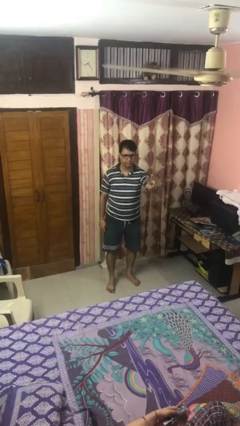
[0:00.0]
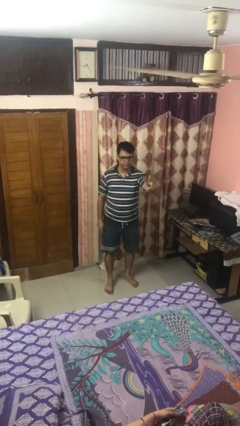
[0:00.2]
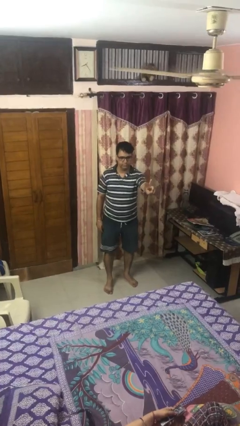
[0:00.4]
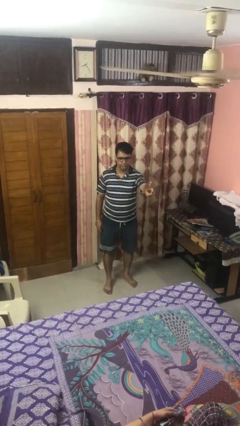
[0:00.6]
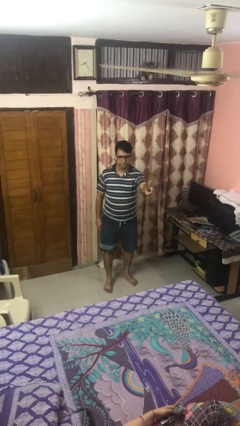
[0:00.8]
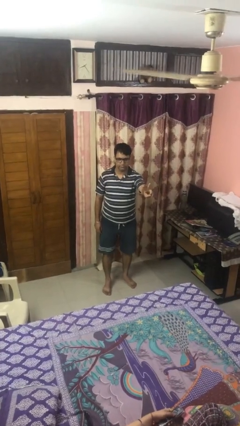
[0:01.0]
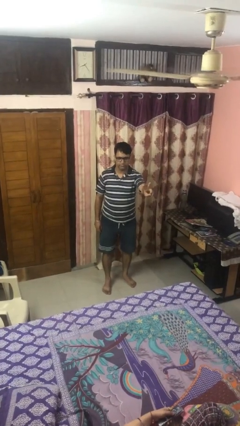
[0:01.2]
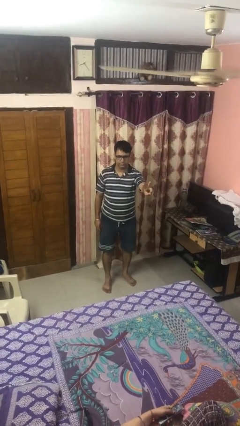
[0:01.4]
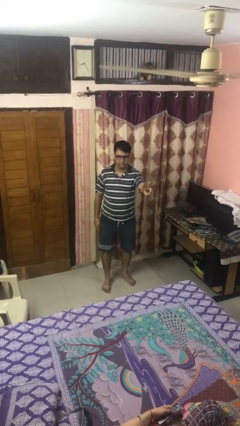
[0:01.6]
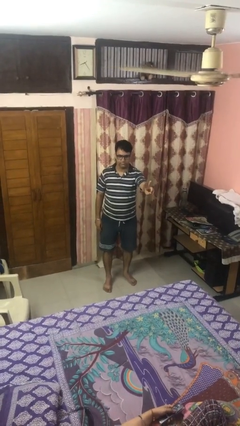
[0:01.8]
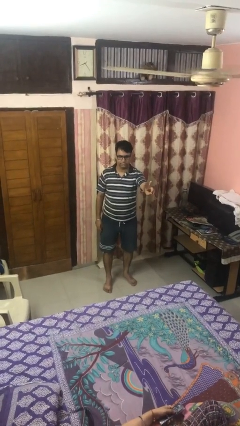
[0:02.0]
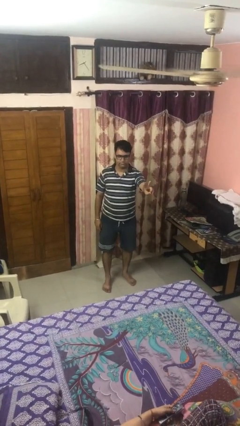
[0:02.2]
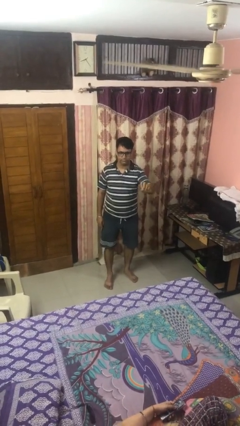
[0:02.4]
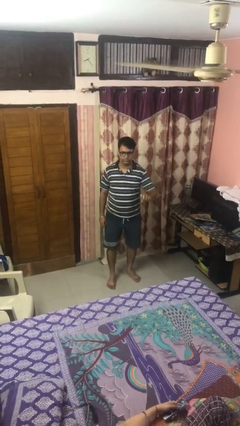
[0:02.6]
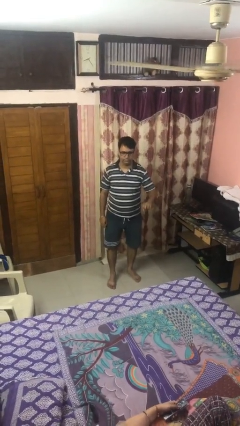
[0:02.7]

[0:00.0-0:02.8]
person gestures peace

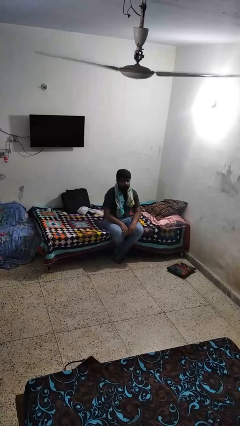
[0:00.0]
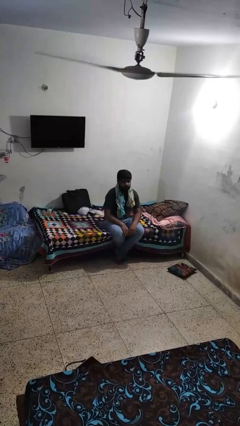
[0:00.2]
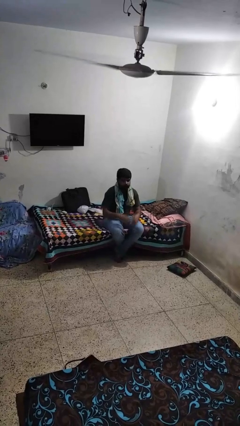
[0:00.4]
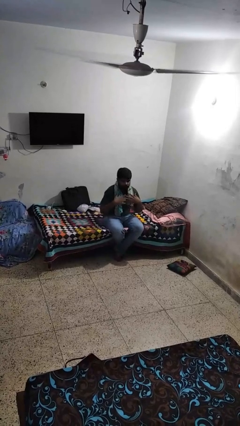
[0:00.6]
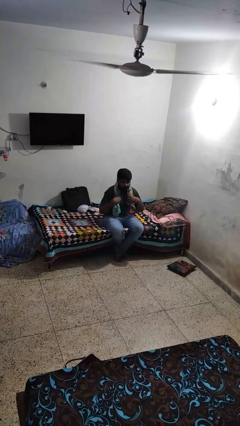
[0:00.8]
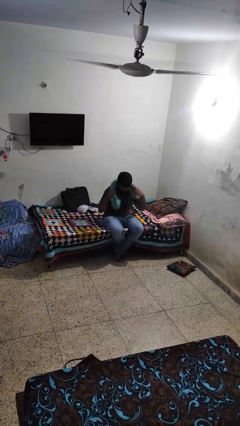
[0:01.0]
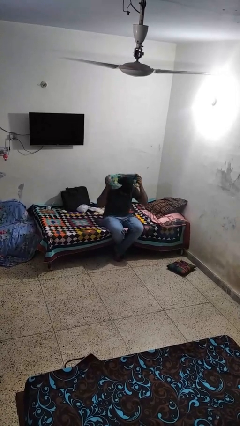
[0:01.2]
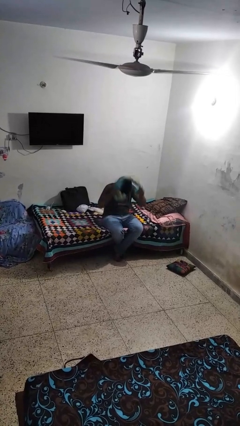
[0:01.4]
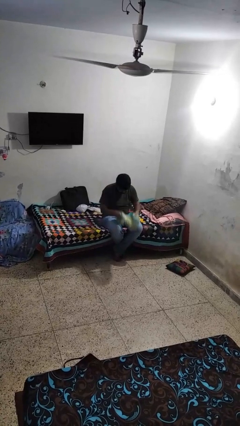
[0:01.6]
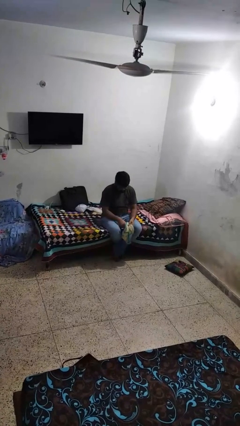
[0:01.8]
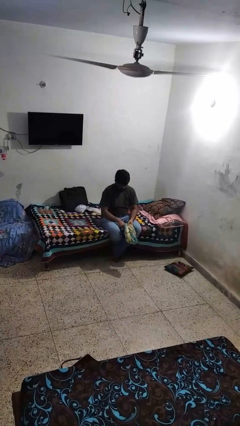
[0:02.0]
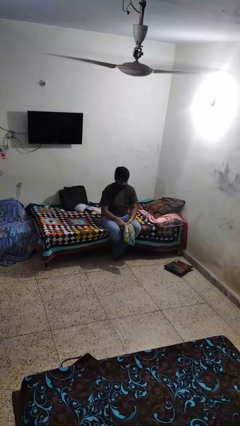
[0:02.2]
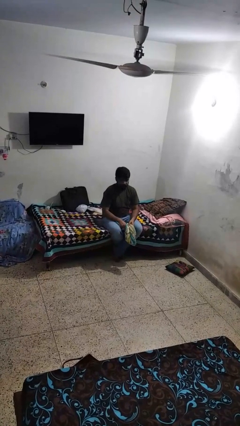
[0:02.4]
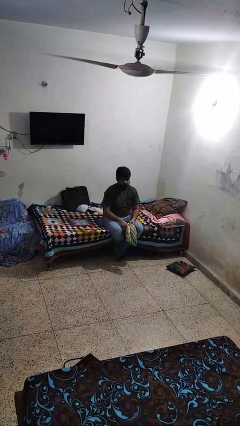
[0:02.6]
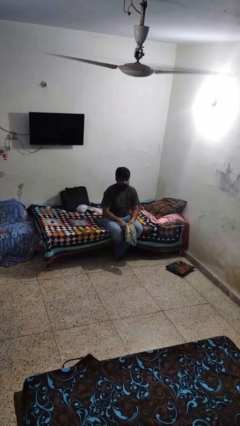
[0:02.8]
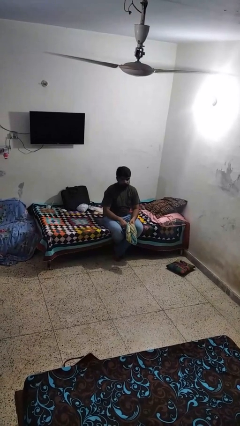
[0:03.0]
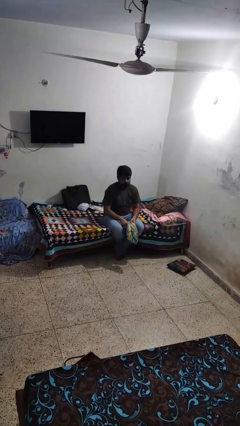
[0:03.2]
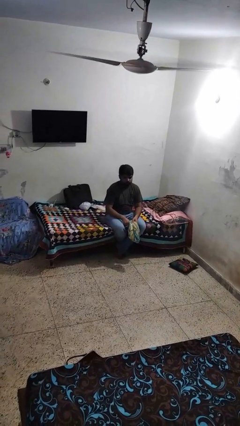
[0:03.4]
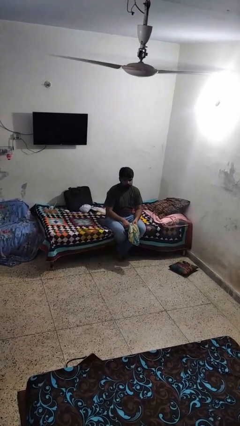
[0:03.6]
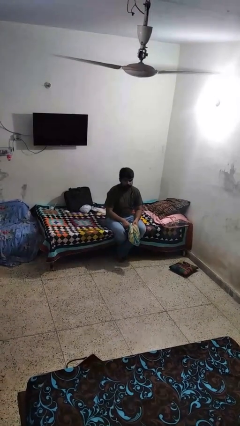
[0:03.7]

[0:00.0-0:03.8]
person takes off scarf

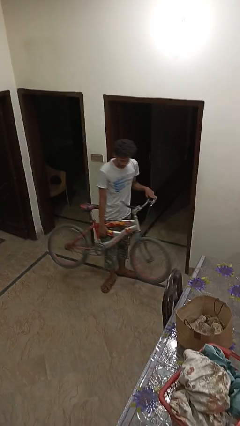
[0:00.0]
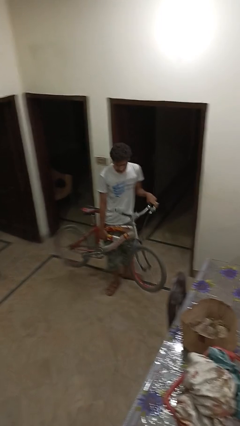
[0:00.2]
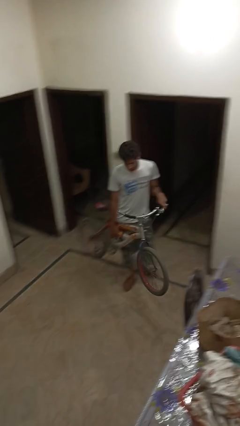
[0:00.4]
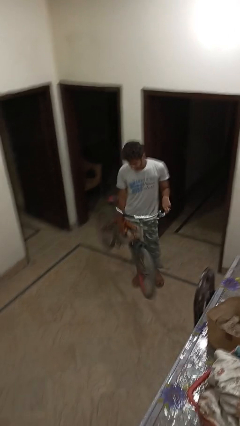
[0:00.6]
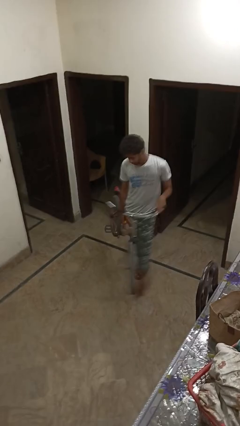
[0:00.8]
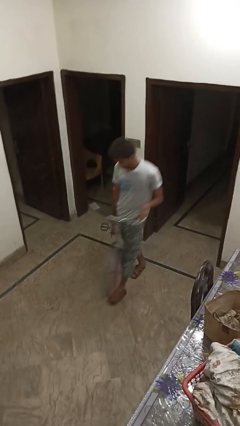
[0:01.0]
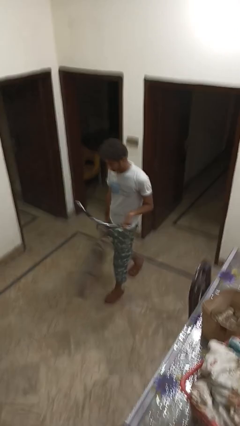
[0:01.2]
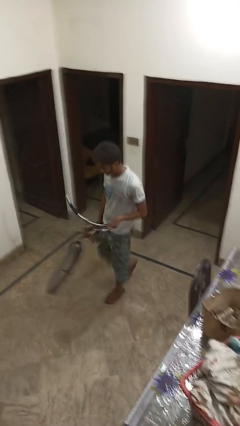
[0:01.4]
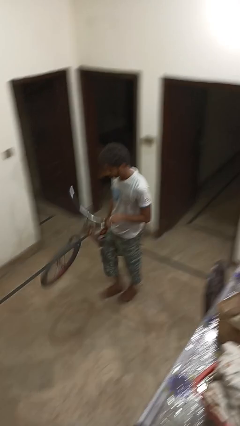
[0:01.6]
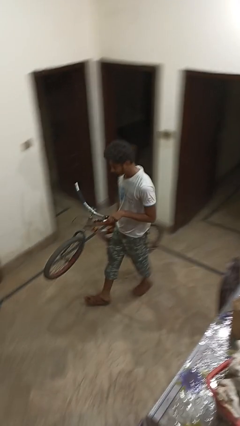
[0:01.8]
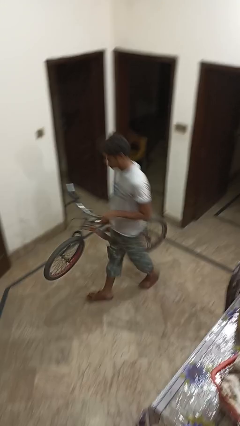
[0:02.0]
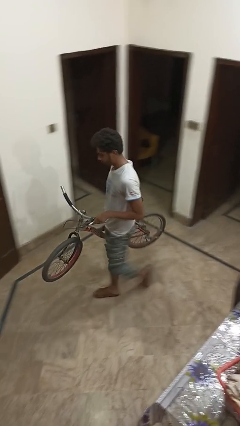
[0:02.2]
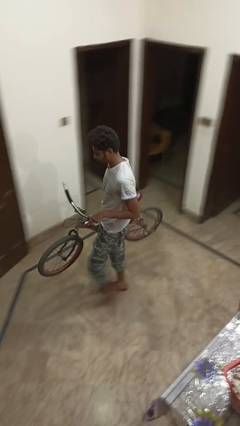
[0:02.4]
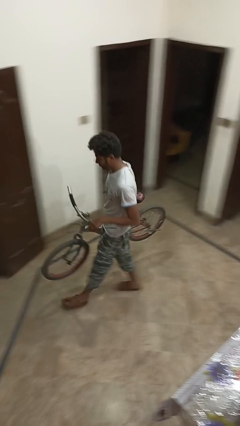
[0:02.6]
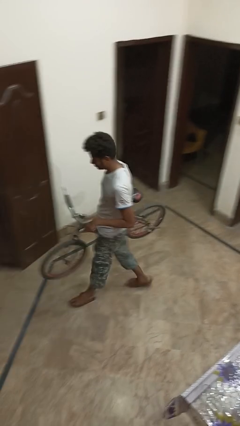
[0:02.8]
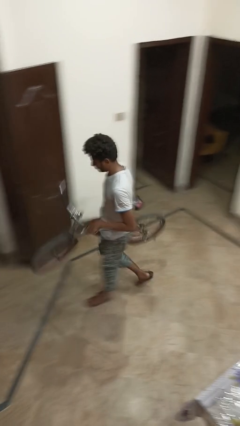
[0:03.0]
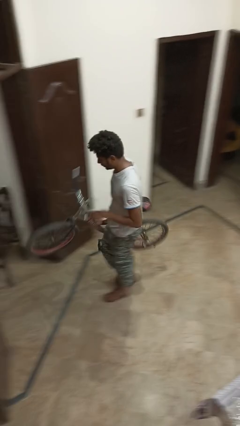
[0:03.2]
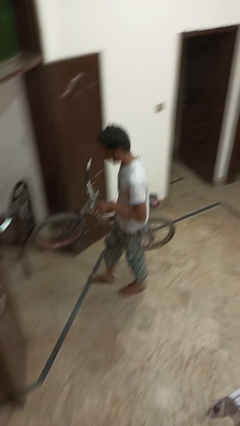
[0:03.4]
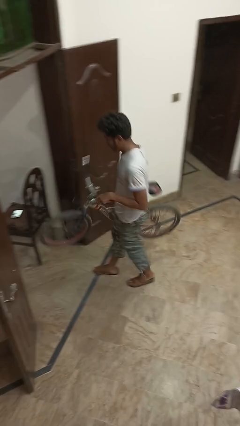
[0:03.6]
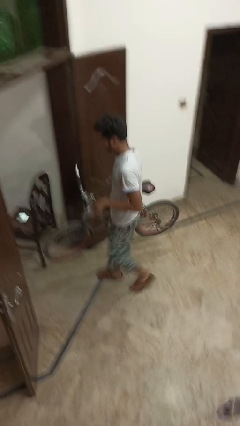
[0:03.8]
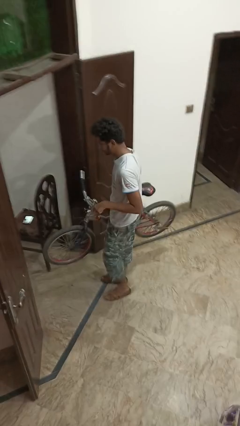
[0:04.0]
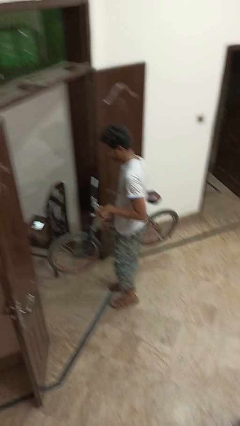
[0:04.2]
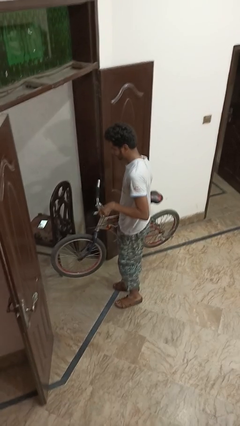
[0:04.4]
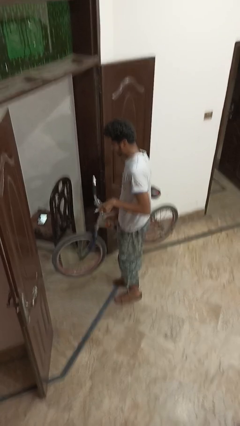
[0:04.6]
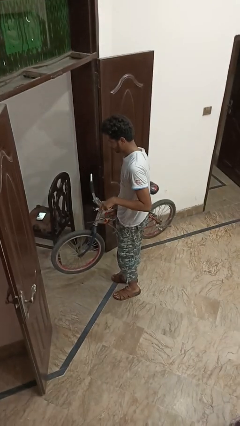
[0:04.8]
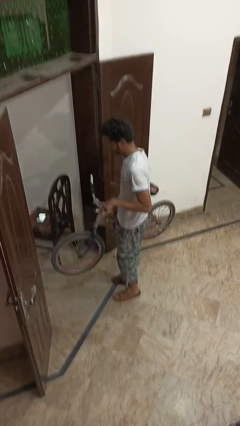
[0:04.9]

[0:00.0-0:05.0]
person carries bicycle

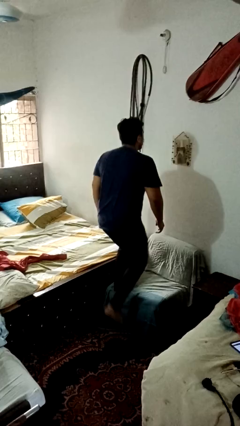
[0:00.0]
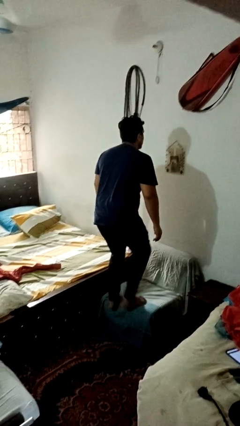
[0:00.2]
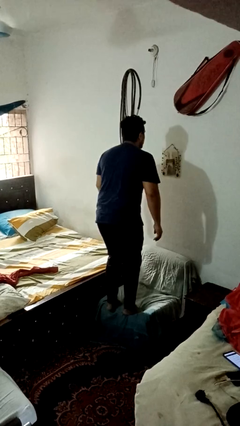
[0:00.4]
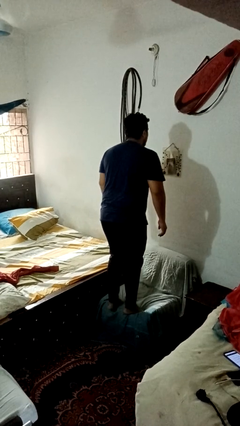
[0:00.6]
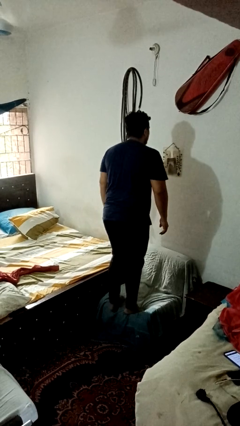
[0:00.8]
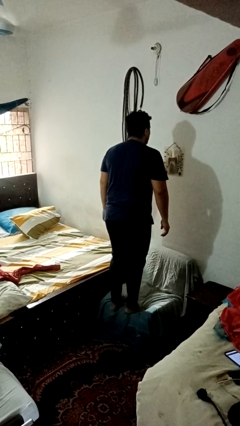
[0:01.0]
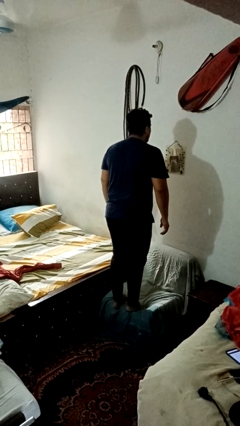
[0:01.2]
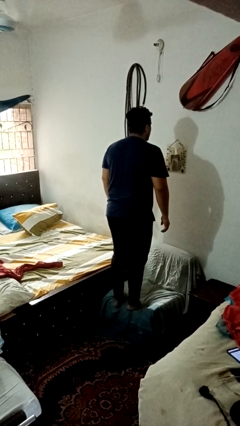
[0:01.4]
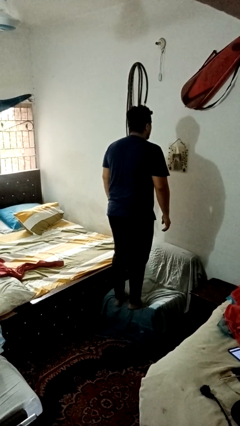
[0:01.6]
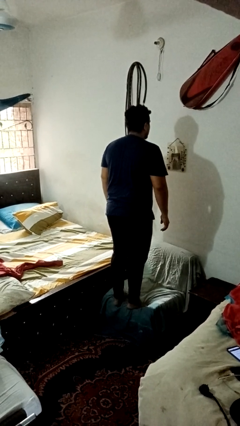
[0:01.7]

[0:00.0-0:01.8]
person climbs on couch

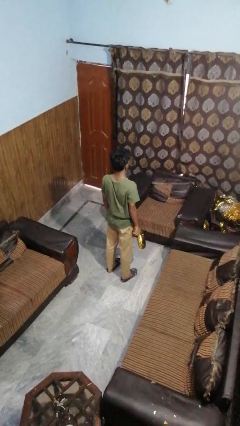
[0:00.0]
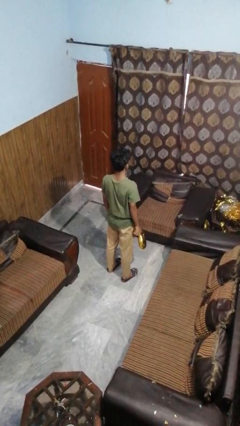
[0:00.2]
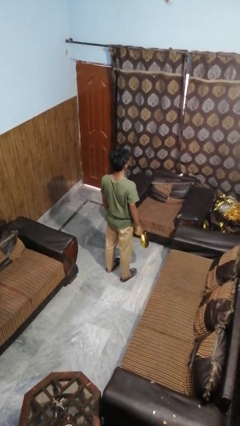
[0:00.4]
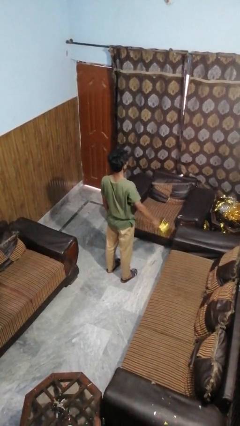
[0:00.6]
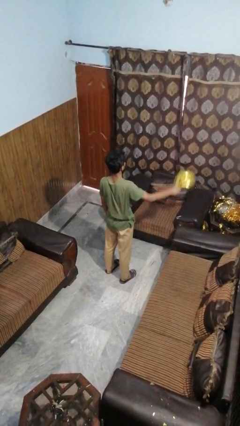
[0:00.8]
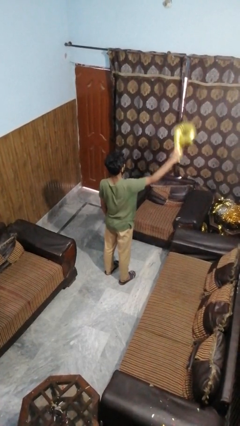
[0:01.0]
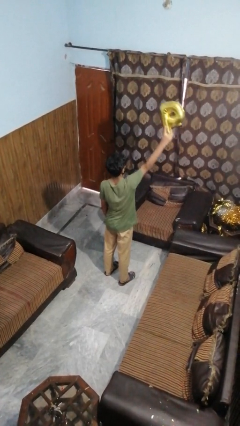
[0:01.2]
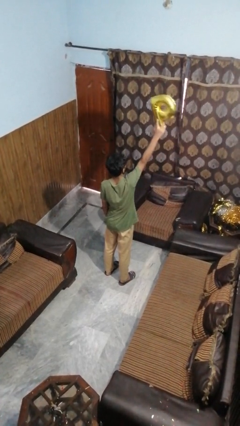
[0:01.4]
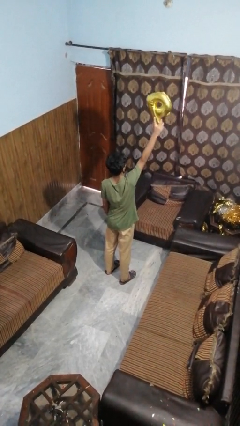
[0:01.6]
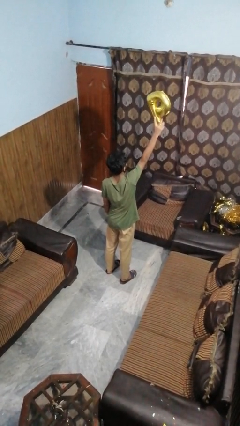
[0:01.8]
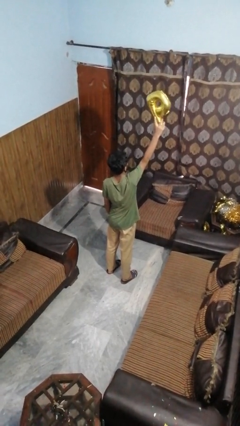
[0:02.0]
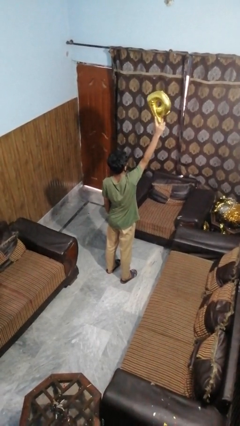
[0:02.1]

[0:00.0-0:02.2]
person holds object above head

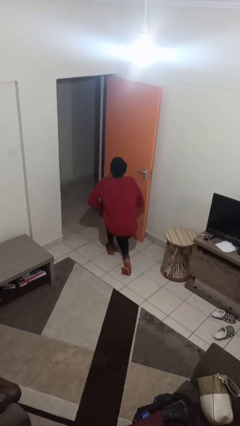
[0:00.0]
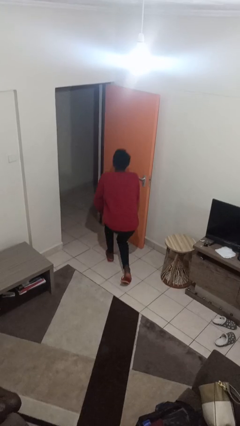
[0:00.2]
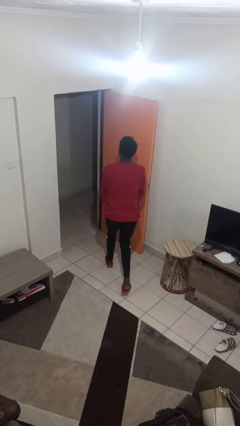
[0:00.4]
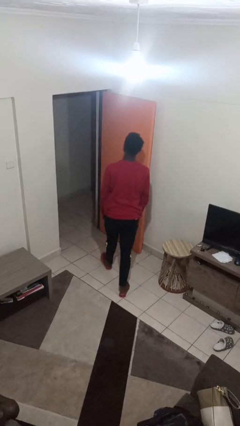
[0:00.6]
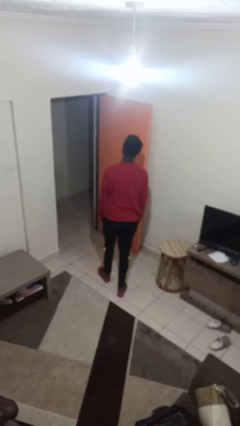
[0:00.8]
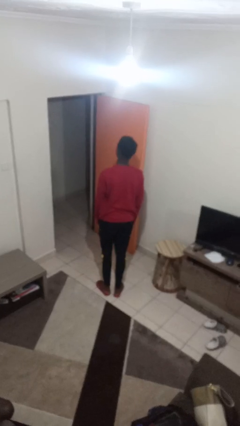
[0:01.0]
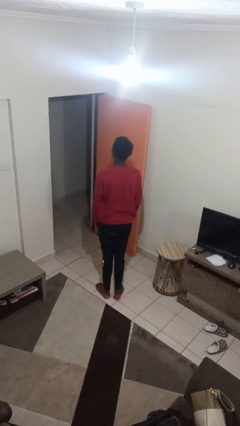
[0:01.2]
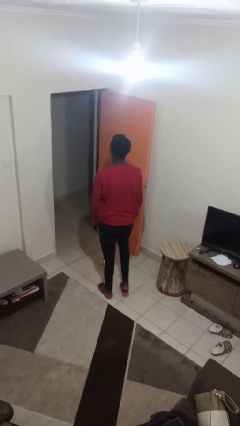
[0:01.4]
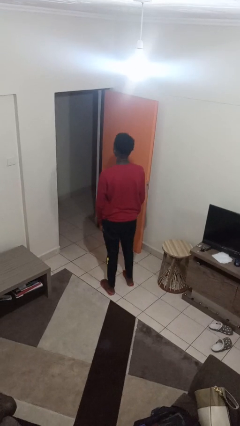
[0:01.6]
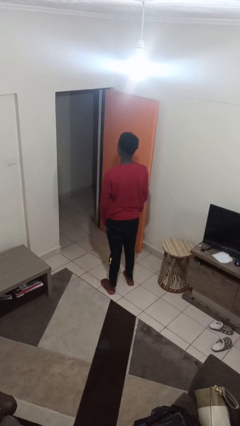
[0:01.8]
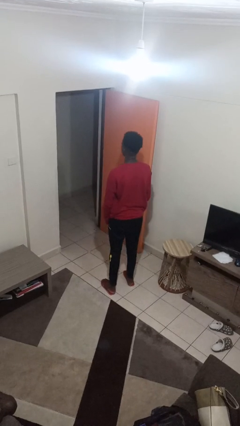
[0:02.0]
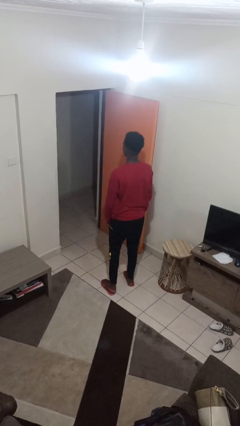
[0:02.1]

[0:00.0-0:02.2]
person stands up from floor
